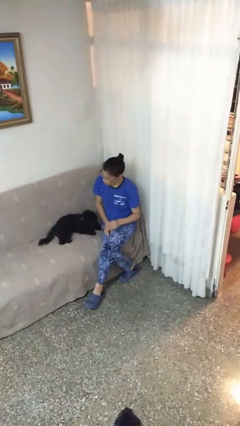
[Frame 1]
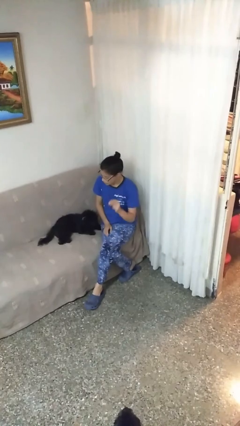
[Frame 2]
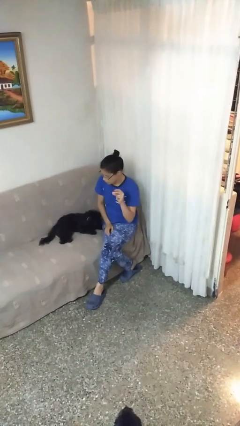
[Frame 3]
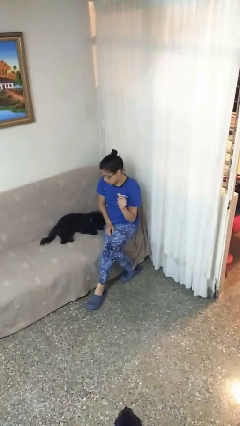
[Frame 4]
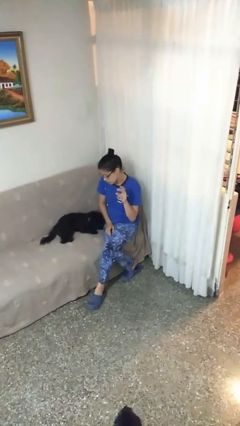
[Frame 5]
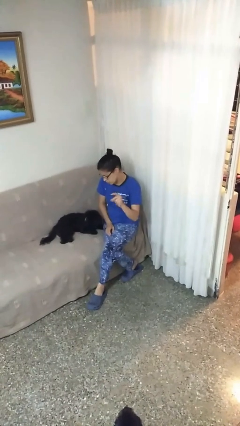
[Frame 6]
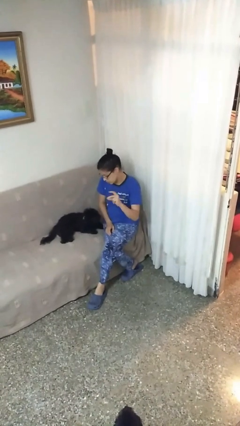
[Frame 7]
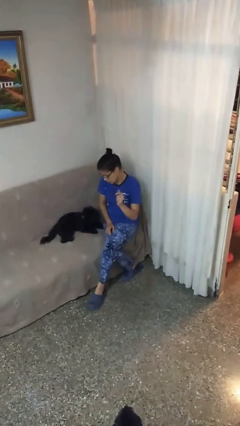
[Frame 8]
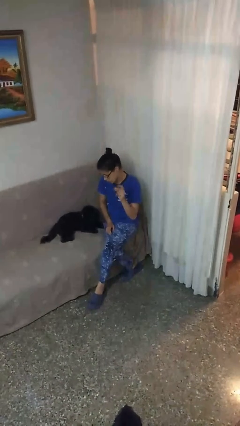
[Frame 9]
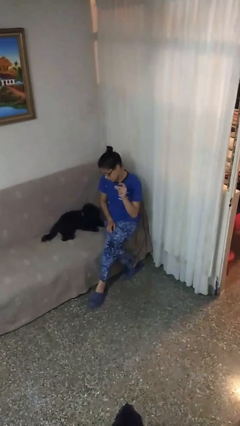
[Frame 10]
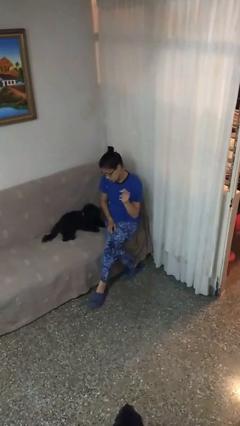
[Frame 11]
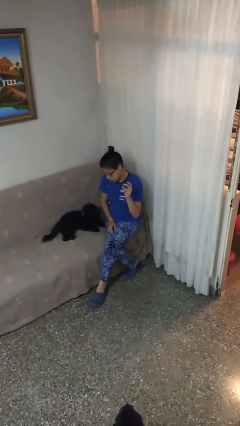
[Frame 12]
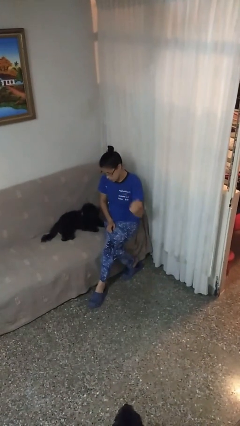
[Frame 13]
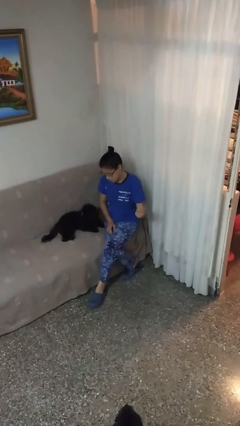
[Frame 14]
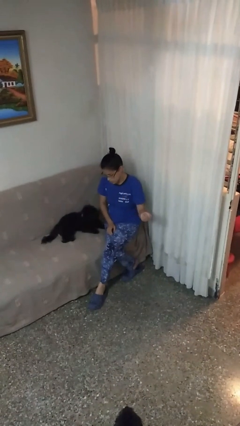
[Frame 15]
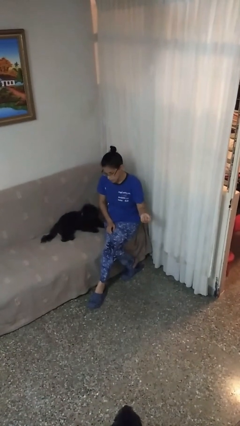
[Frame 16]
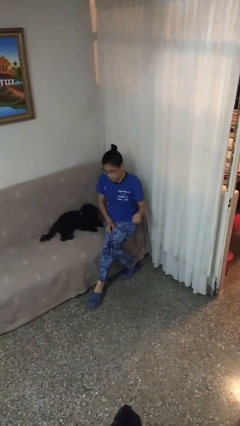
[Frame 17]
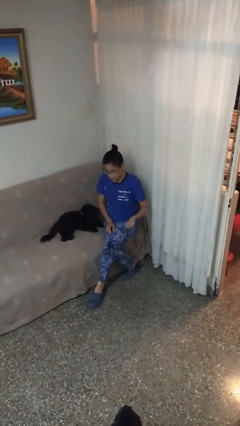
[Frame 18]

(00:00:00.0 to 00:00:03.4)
person snaps fingers

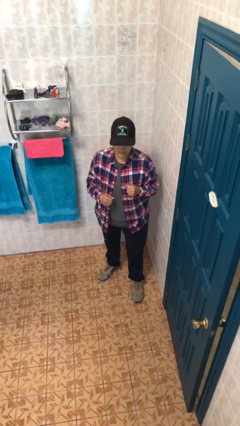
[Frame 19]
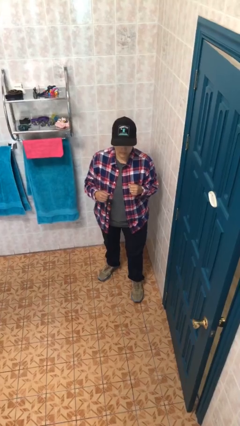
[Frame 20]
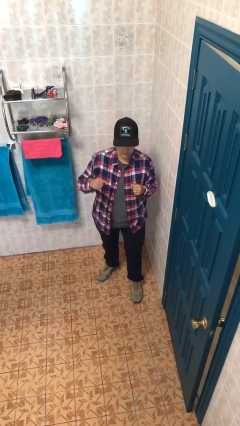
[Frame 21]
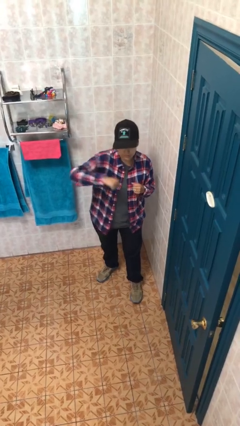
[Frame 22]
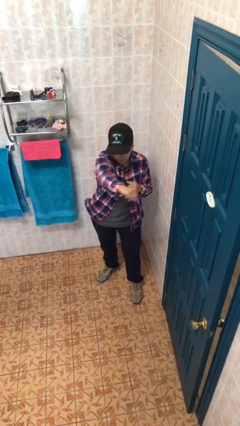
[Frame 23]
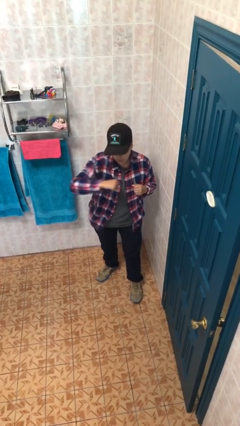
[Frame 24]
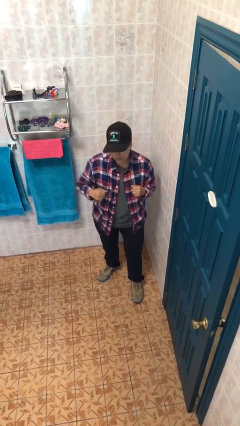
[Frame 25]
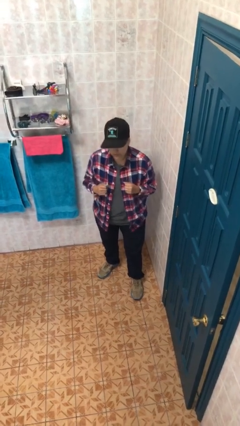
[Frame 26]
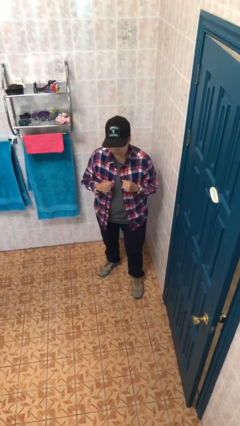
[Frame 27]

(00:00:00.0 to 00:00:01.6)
person punches

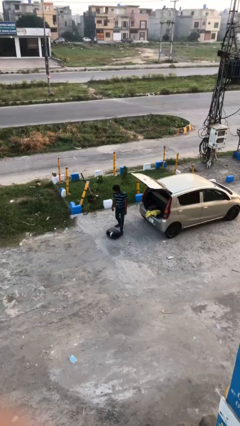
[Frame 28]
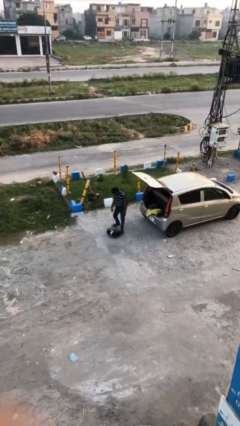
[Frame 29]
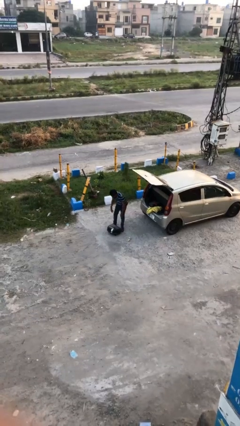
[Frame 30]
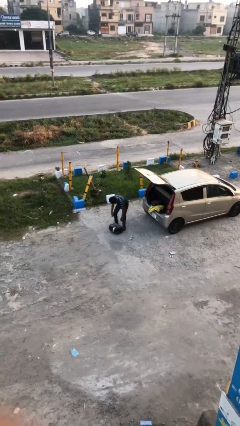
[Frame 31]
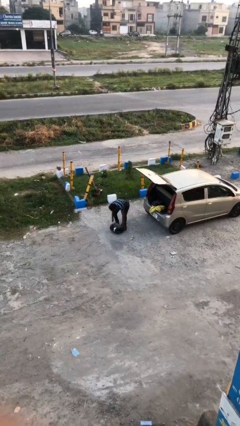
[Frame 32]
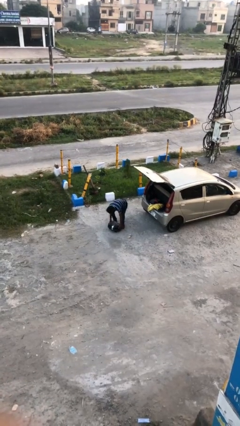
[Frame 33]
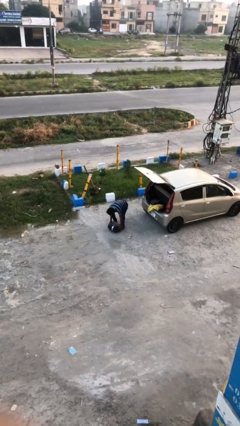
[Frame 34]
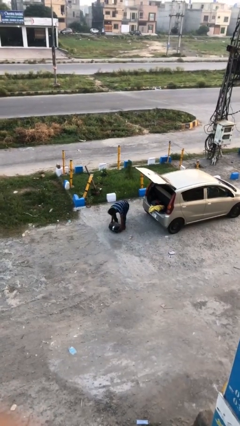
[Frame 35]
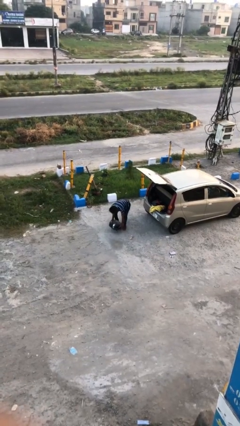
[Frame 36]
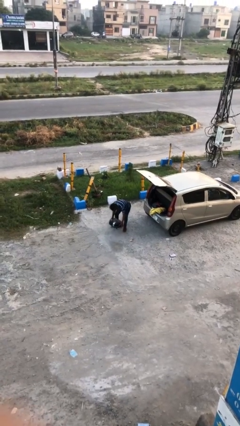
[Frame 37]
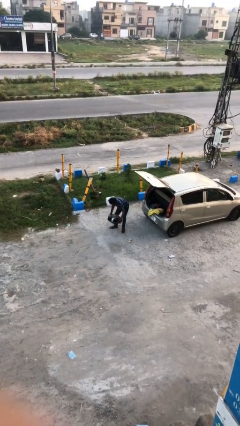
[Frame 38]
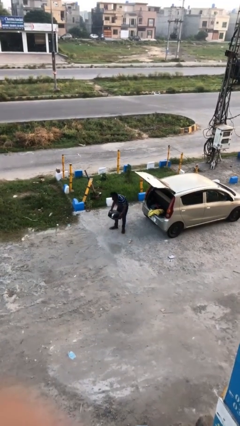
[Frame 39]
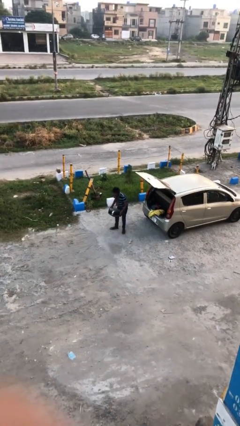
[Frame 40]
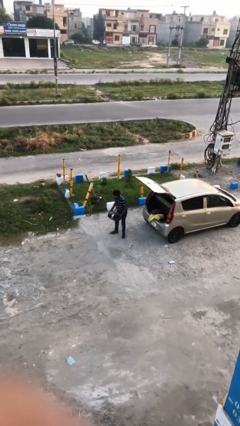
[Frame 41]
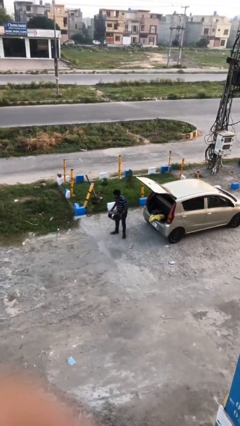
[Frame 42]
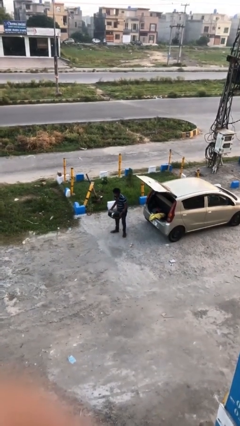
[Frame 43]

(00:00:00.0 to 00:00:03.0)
person picks up object from floor

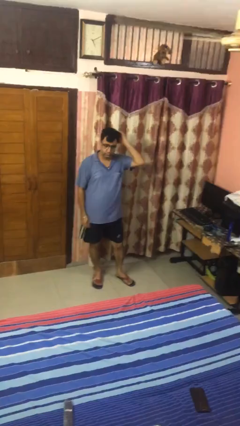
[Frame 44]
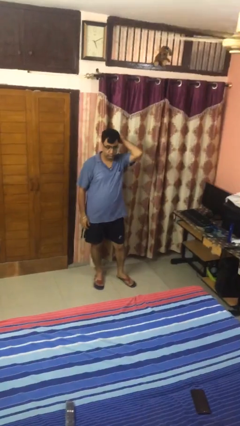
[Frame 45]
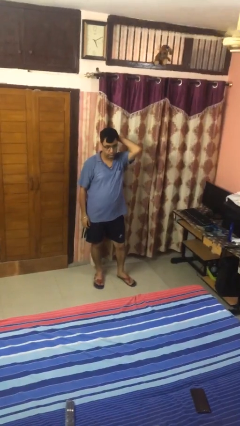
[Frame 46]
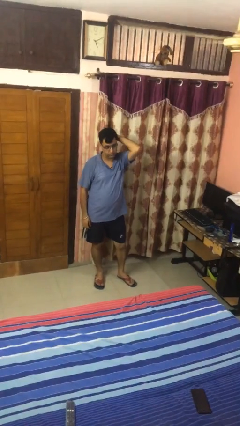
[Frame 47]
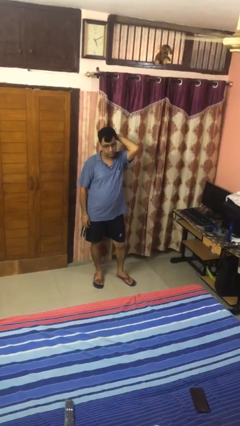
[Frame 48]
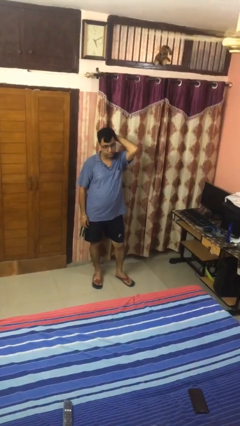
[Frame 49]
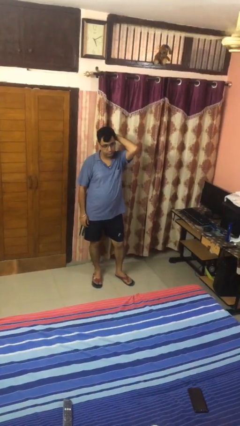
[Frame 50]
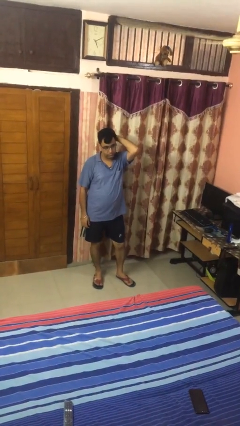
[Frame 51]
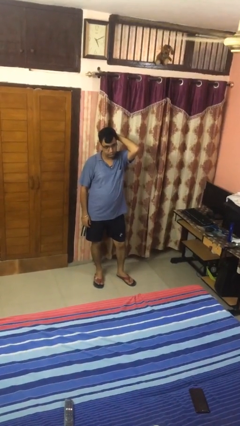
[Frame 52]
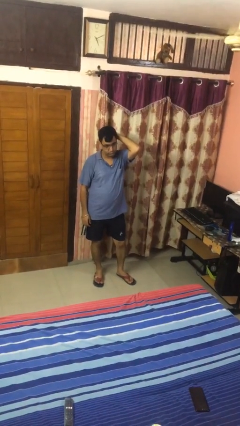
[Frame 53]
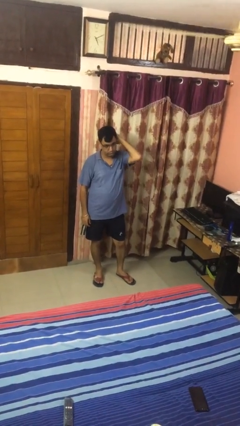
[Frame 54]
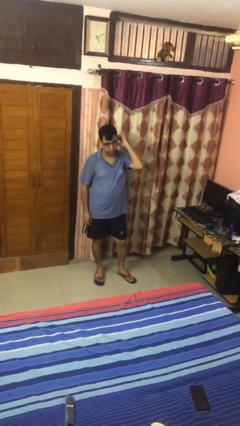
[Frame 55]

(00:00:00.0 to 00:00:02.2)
person scratches face

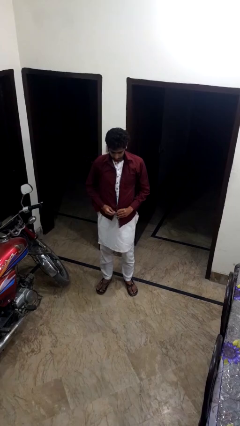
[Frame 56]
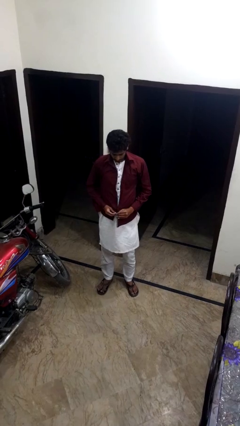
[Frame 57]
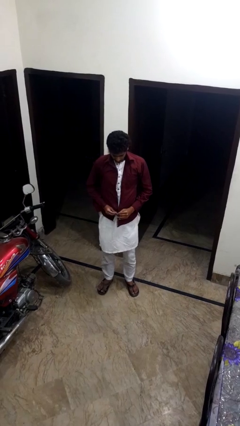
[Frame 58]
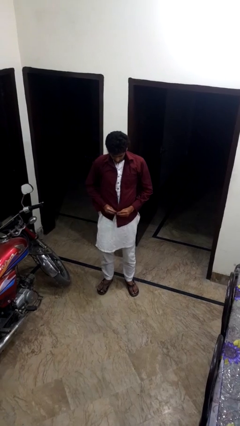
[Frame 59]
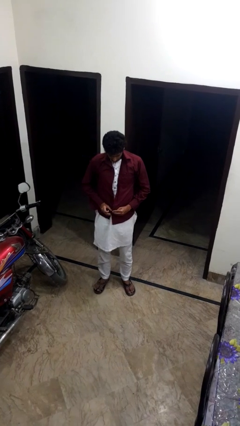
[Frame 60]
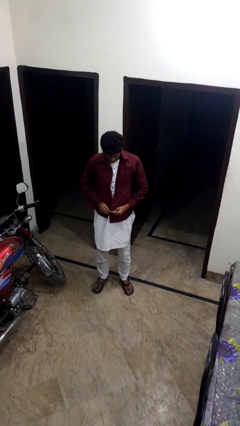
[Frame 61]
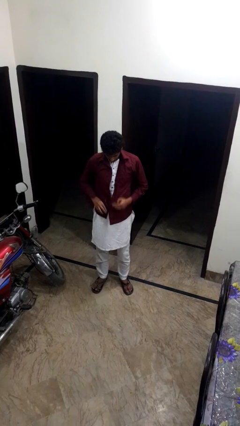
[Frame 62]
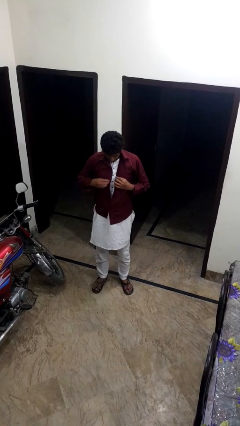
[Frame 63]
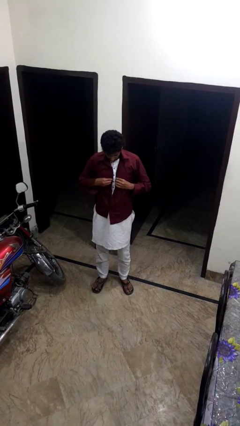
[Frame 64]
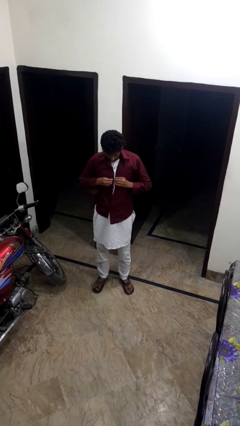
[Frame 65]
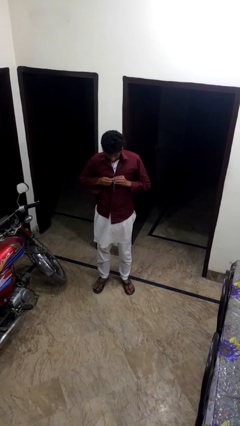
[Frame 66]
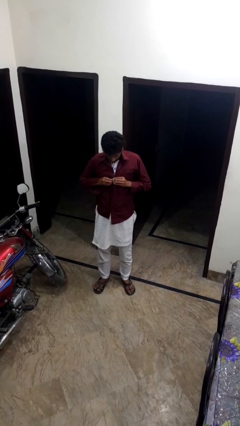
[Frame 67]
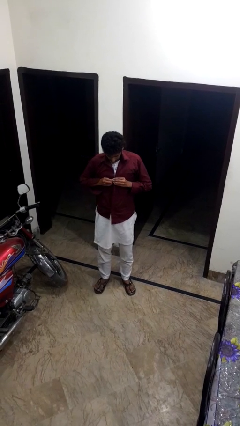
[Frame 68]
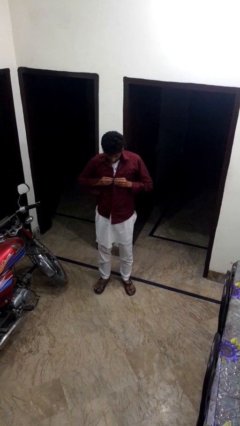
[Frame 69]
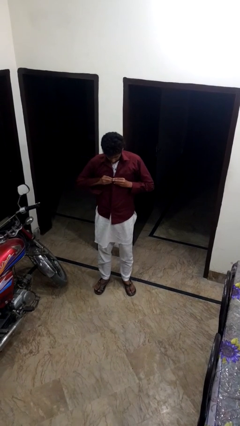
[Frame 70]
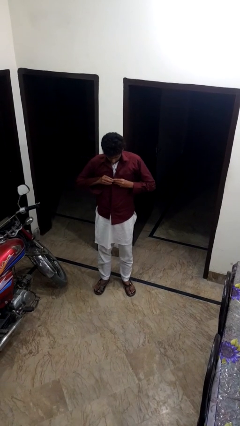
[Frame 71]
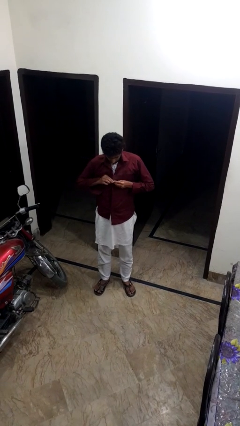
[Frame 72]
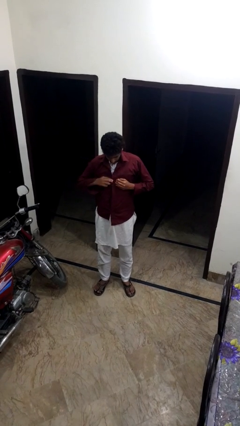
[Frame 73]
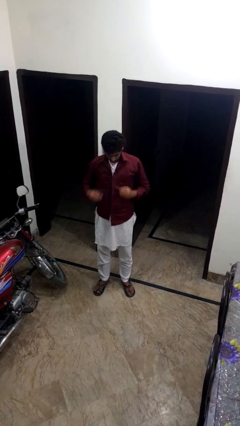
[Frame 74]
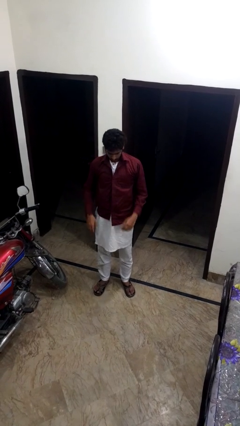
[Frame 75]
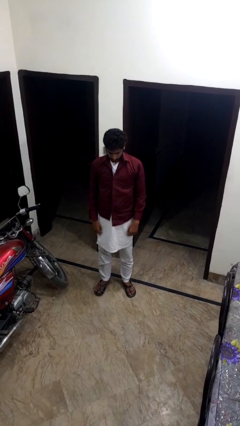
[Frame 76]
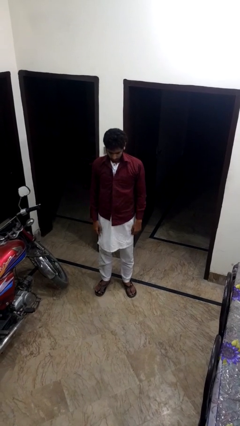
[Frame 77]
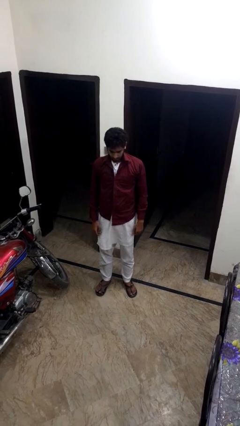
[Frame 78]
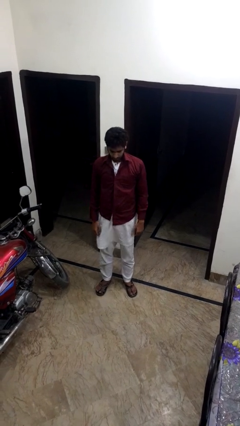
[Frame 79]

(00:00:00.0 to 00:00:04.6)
person buttons shirt

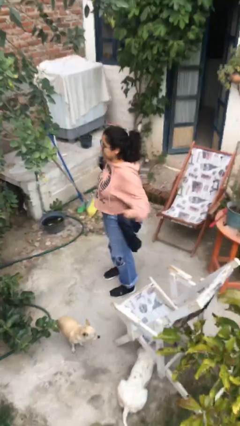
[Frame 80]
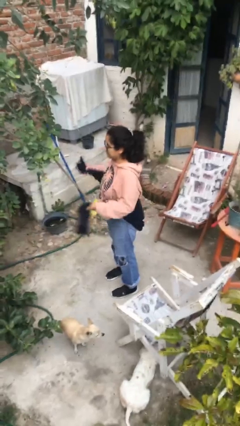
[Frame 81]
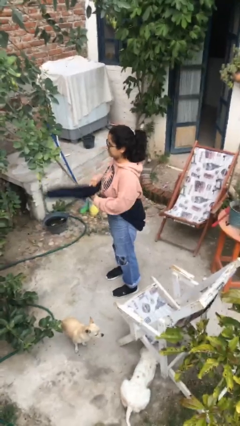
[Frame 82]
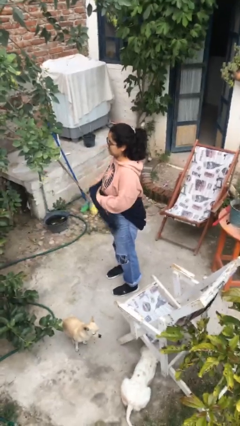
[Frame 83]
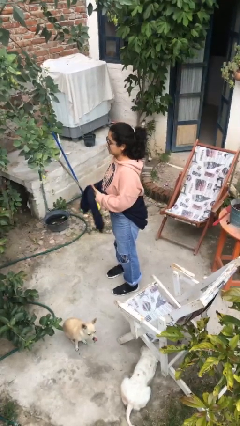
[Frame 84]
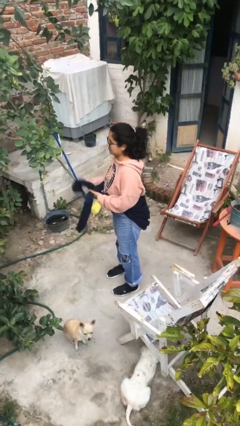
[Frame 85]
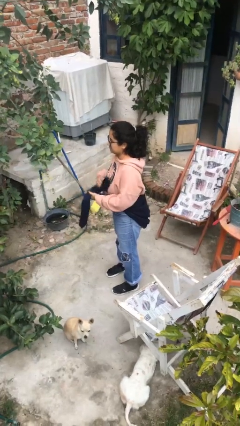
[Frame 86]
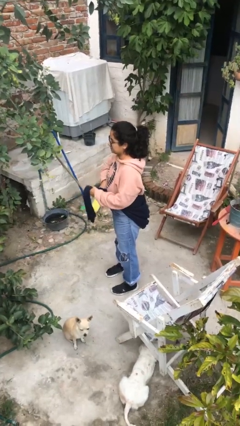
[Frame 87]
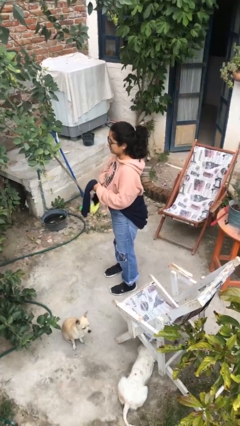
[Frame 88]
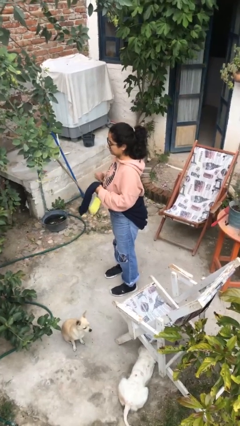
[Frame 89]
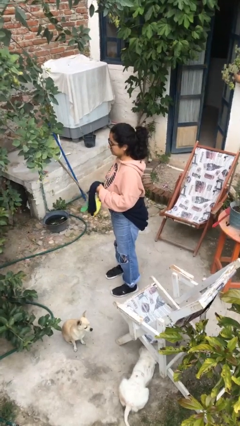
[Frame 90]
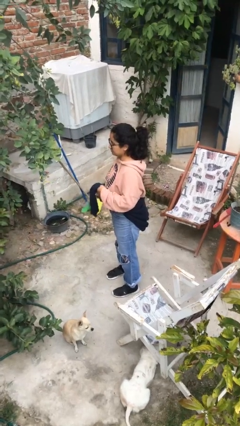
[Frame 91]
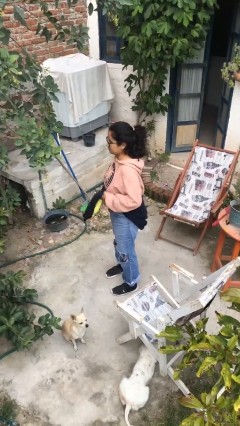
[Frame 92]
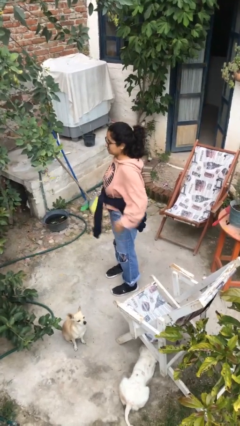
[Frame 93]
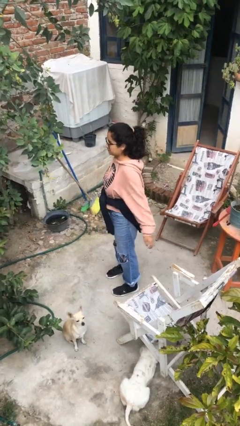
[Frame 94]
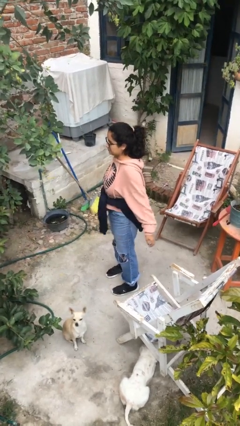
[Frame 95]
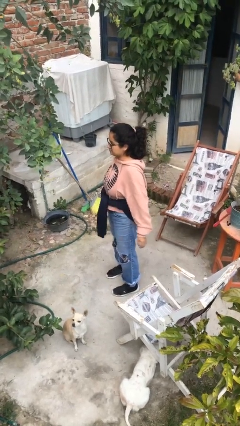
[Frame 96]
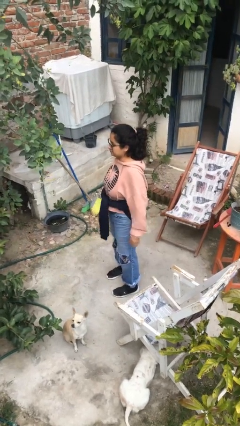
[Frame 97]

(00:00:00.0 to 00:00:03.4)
person ties jacket around waist
